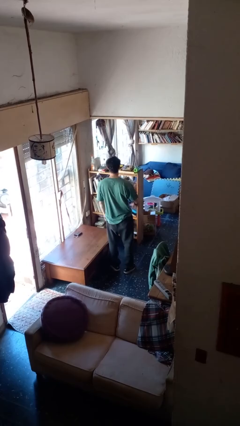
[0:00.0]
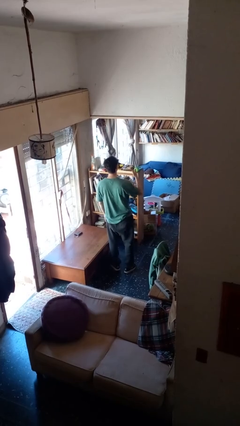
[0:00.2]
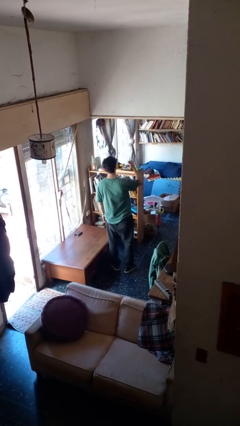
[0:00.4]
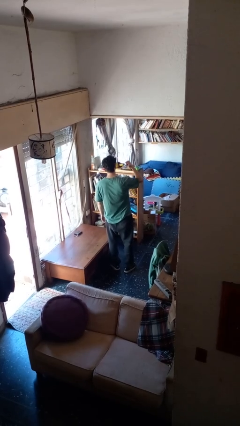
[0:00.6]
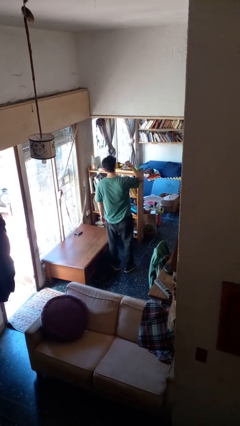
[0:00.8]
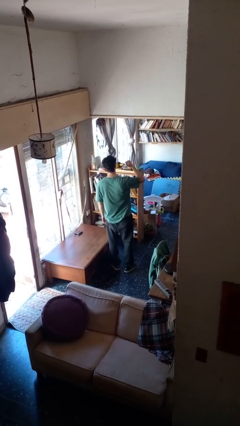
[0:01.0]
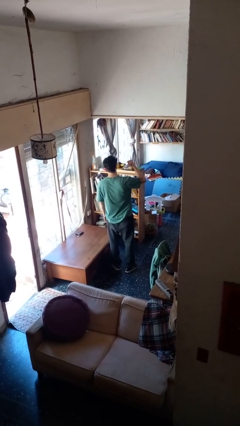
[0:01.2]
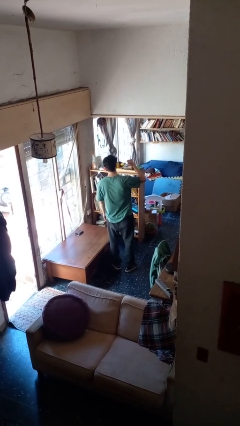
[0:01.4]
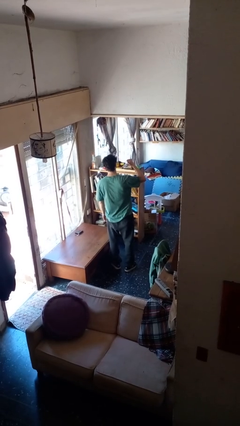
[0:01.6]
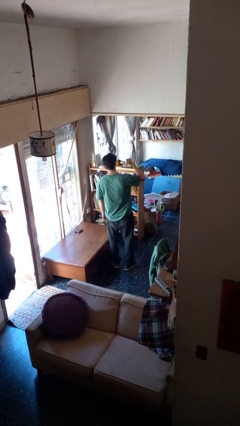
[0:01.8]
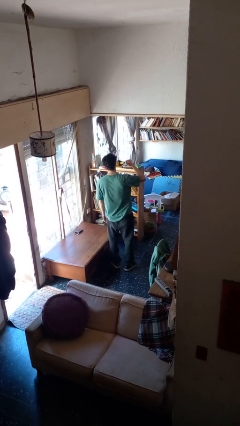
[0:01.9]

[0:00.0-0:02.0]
person gestures behind me

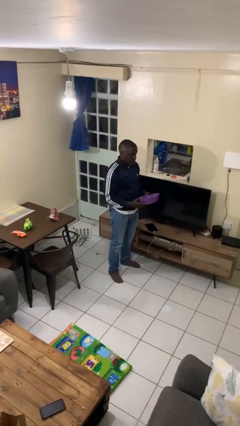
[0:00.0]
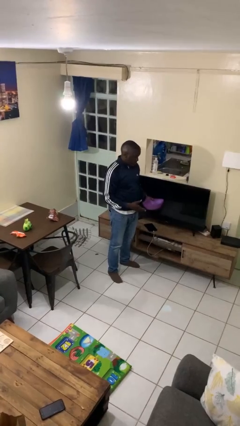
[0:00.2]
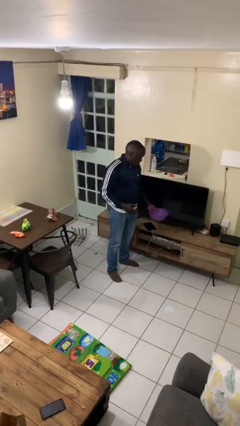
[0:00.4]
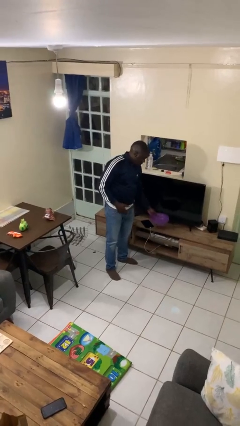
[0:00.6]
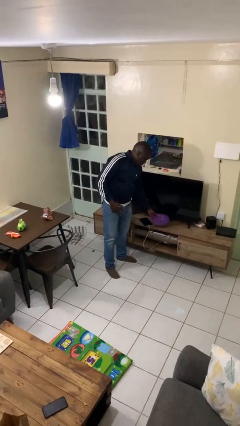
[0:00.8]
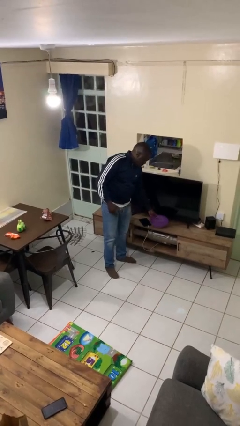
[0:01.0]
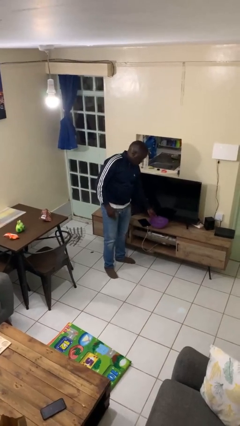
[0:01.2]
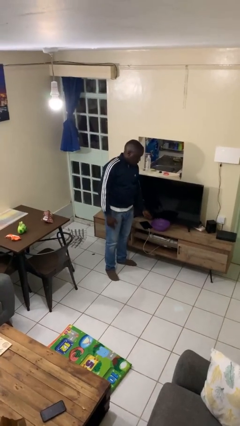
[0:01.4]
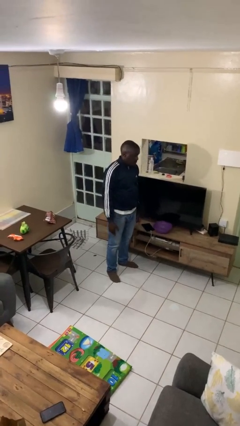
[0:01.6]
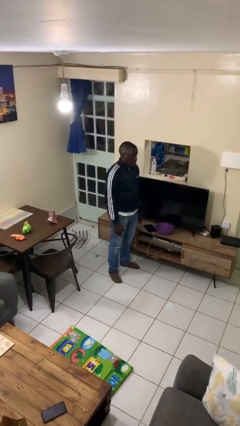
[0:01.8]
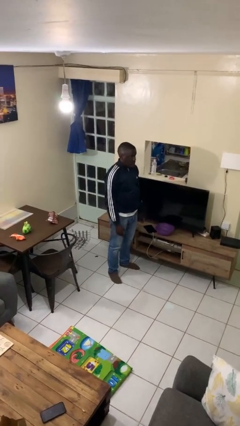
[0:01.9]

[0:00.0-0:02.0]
person puts down object on countertop

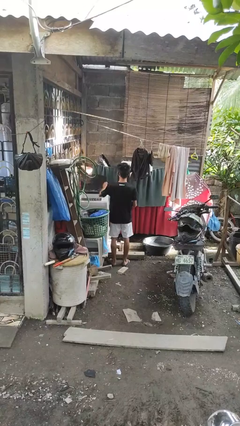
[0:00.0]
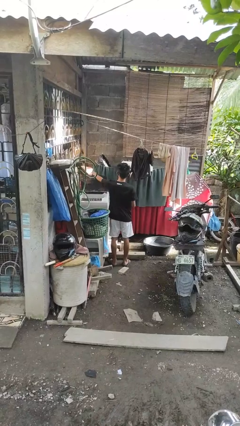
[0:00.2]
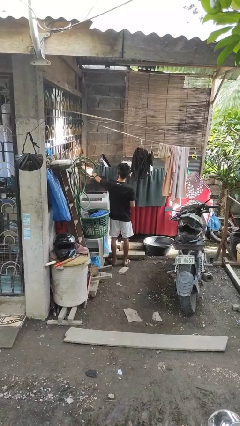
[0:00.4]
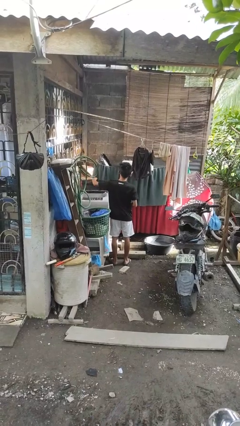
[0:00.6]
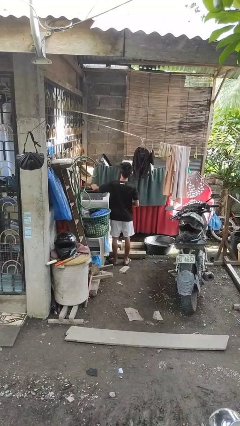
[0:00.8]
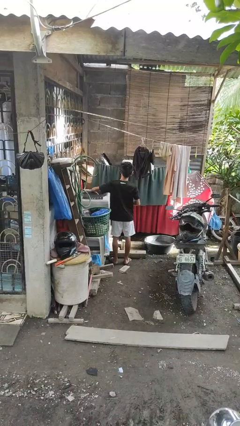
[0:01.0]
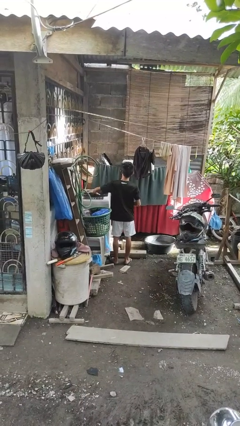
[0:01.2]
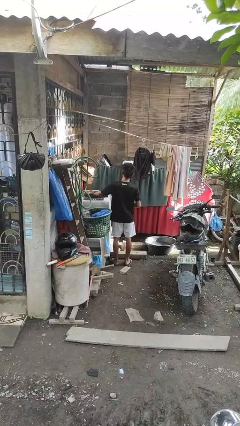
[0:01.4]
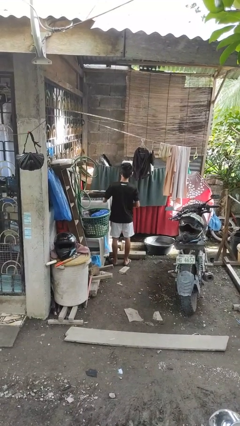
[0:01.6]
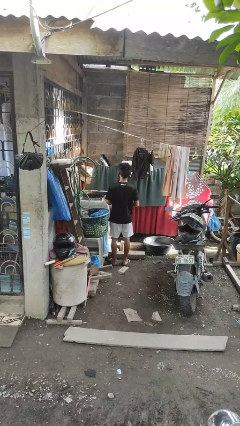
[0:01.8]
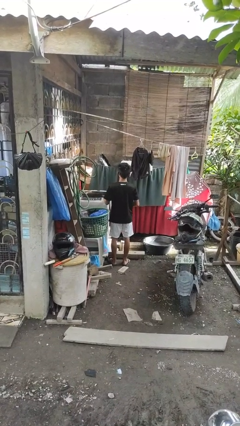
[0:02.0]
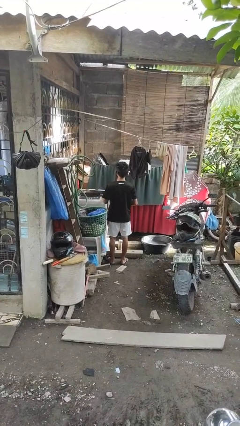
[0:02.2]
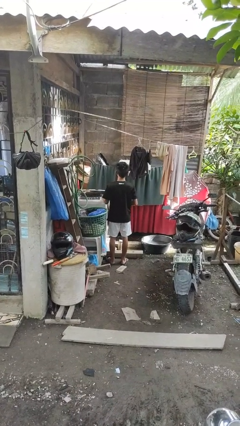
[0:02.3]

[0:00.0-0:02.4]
person closes clothes washer

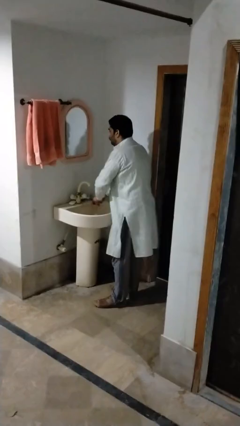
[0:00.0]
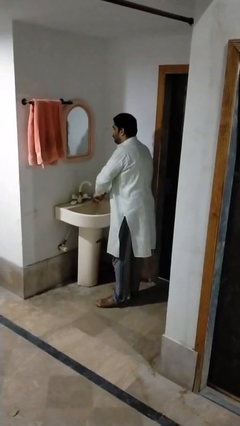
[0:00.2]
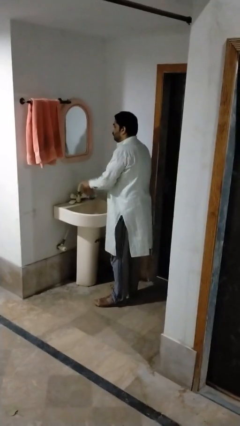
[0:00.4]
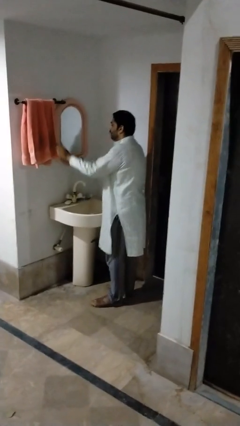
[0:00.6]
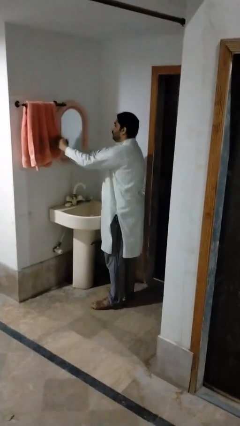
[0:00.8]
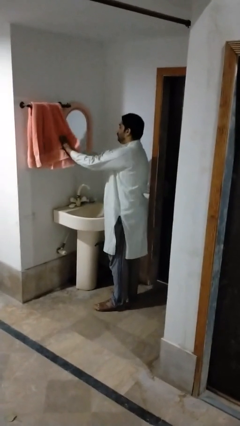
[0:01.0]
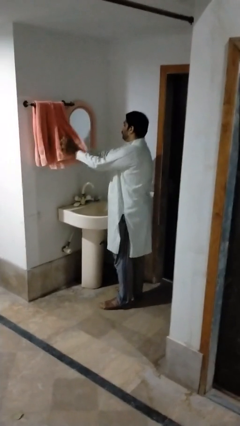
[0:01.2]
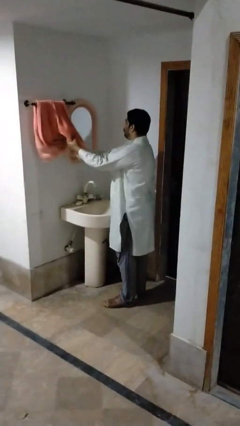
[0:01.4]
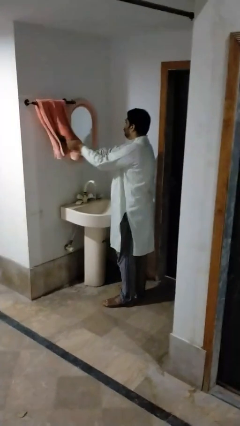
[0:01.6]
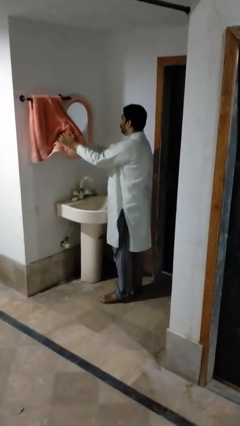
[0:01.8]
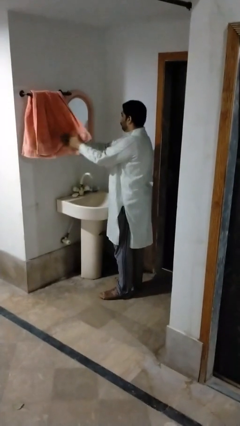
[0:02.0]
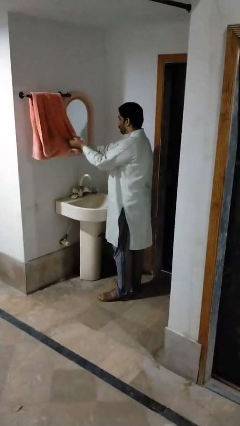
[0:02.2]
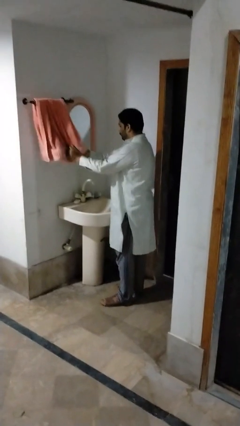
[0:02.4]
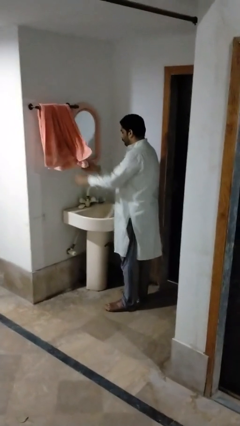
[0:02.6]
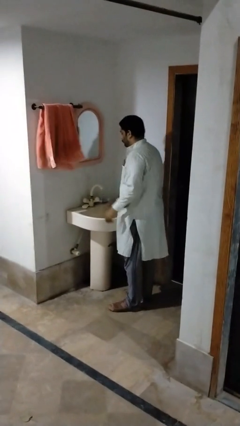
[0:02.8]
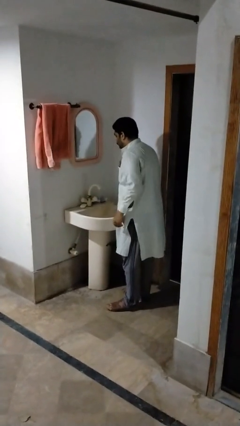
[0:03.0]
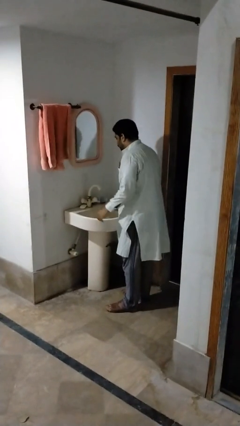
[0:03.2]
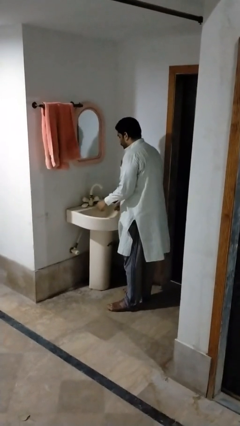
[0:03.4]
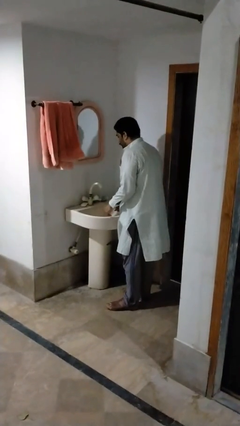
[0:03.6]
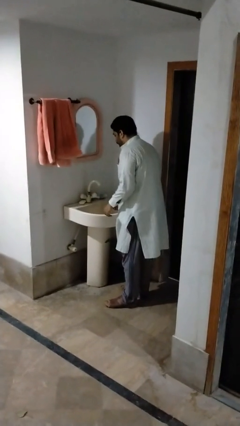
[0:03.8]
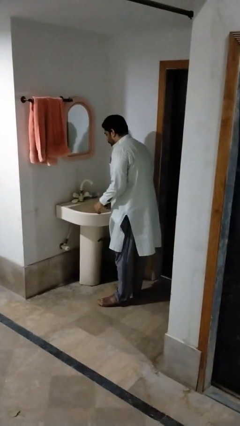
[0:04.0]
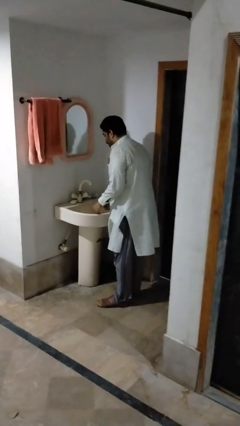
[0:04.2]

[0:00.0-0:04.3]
person dries hands with towel

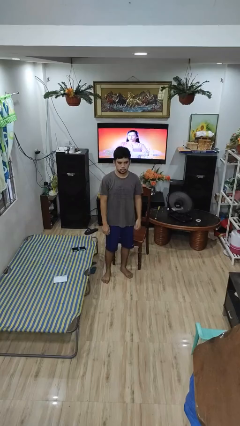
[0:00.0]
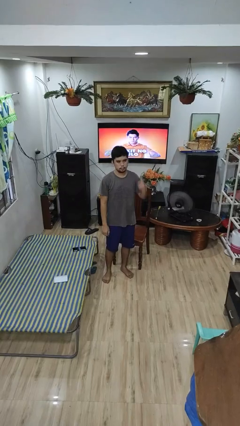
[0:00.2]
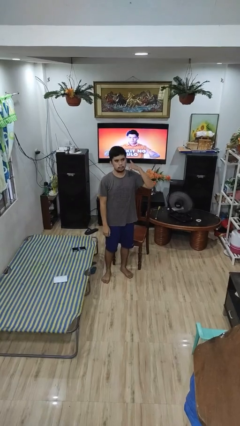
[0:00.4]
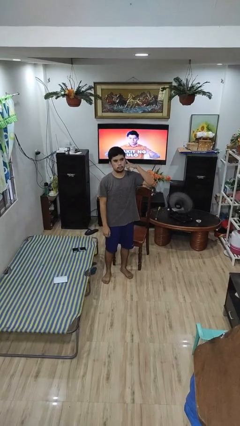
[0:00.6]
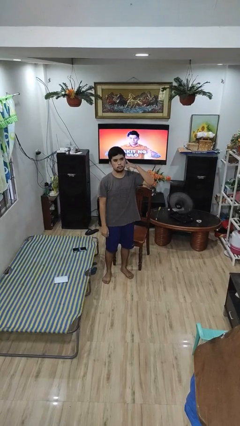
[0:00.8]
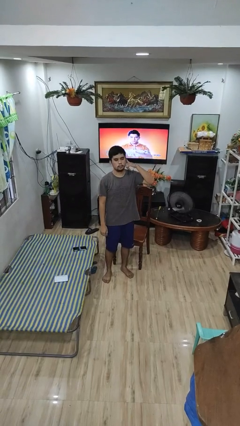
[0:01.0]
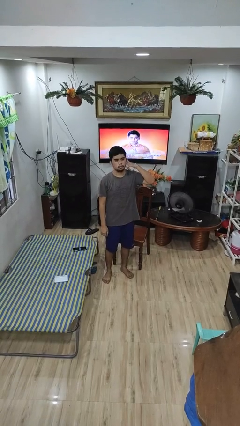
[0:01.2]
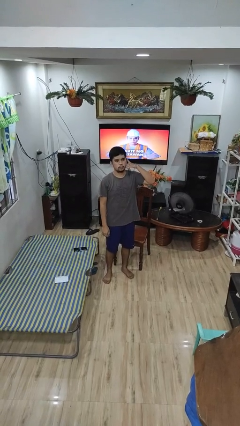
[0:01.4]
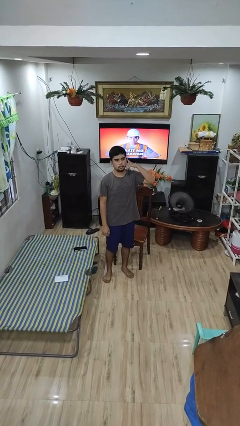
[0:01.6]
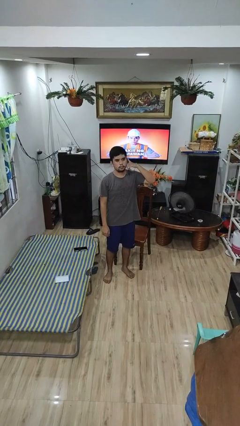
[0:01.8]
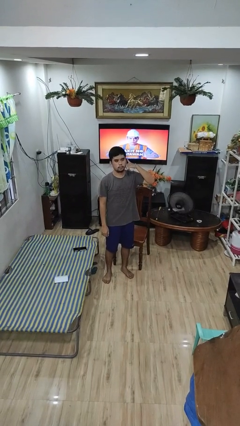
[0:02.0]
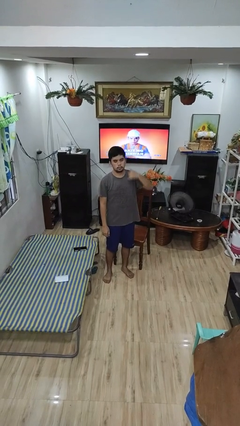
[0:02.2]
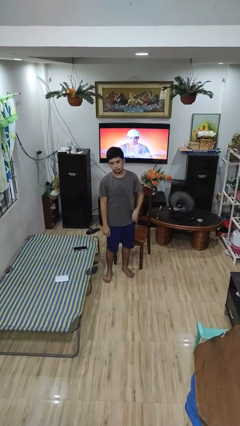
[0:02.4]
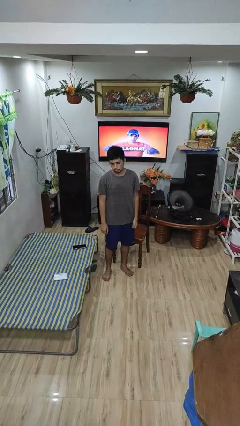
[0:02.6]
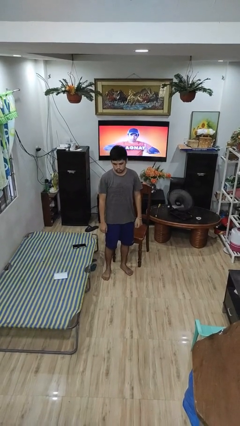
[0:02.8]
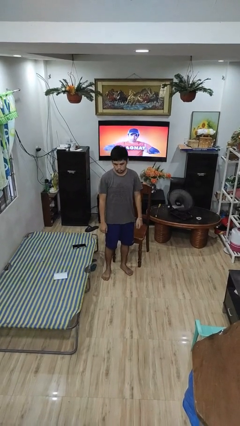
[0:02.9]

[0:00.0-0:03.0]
person gestures call me

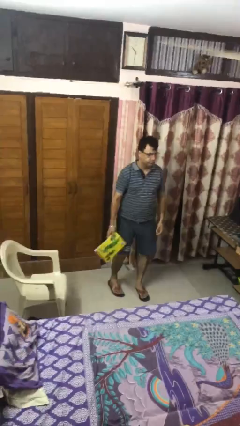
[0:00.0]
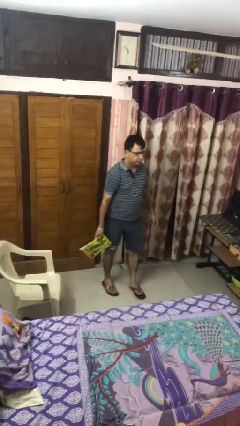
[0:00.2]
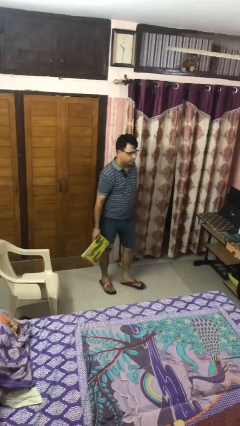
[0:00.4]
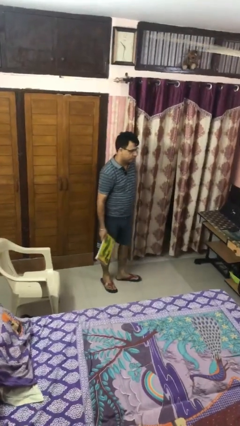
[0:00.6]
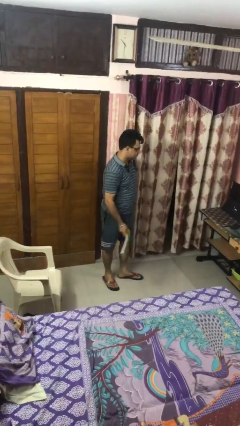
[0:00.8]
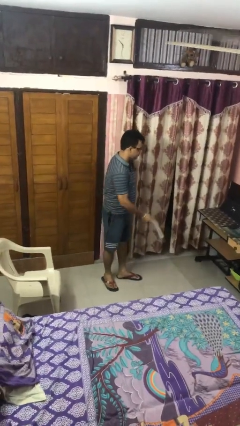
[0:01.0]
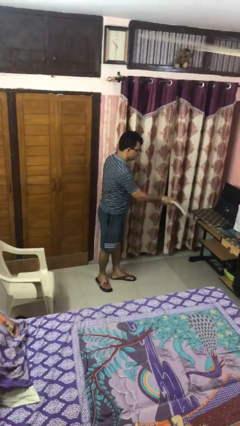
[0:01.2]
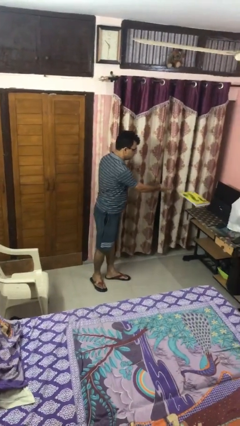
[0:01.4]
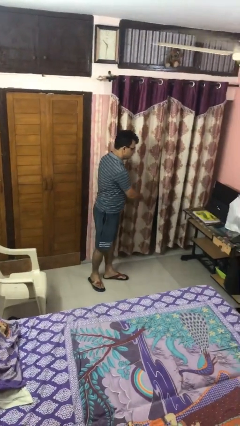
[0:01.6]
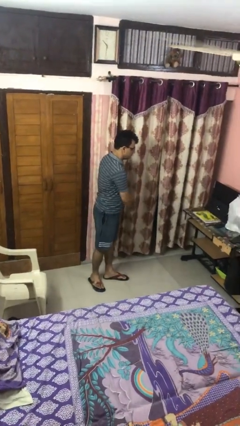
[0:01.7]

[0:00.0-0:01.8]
person throws object on table

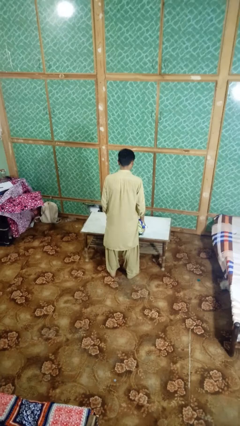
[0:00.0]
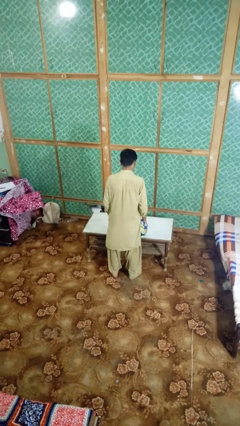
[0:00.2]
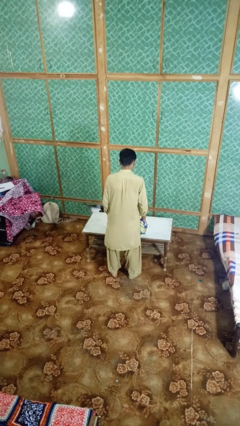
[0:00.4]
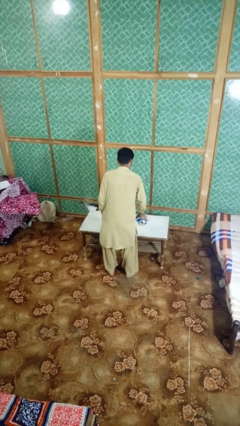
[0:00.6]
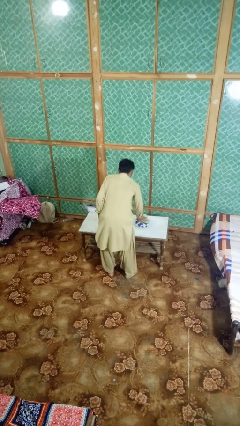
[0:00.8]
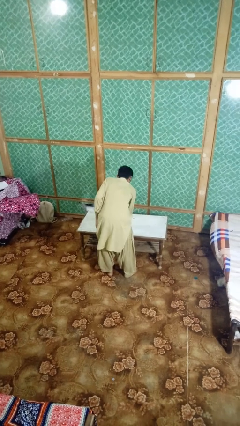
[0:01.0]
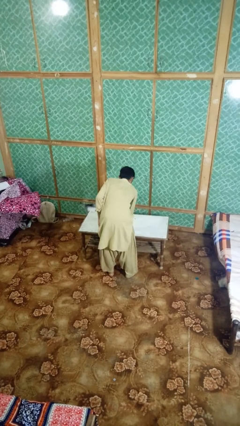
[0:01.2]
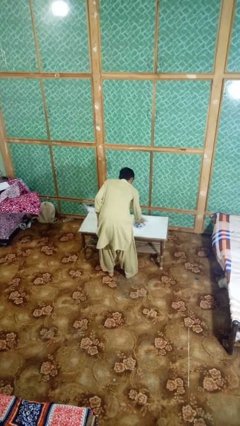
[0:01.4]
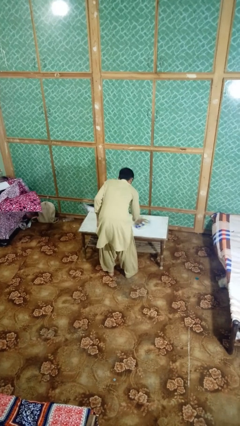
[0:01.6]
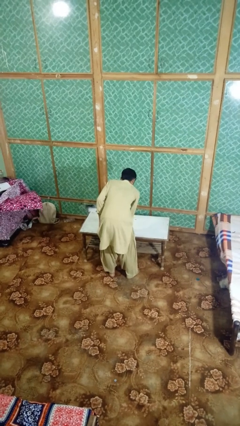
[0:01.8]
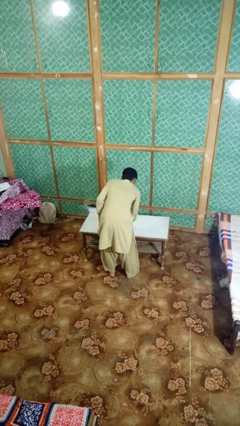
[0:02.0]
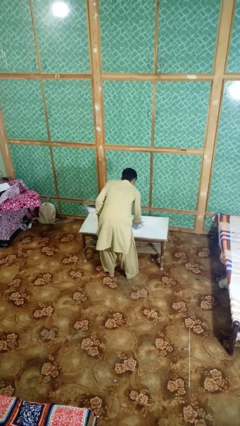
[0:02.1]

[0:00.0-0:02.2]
person cleans table with rag
